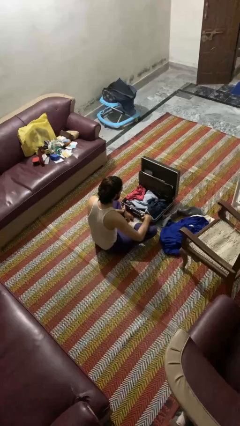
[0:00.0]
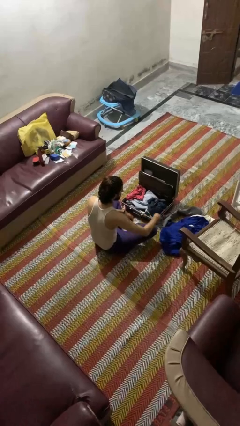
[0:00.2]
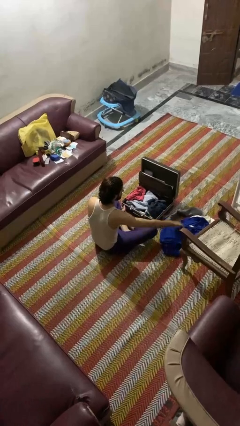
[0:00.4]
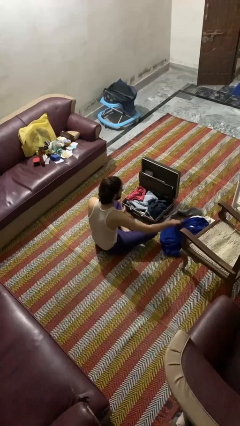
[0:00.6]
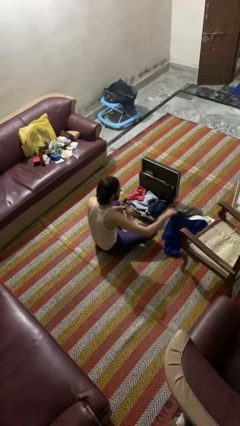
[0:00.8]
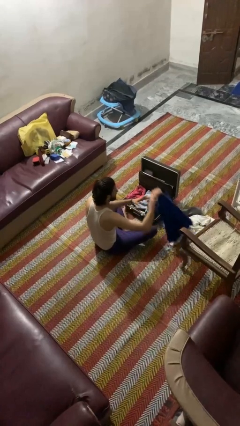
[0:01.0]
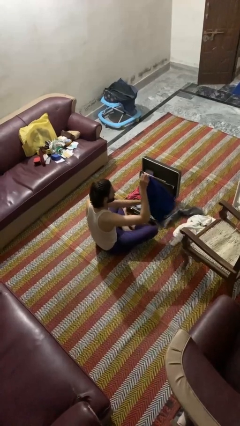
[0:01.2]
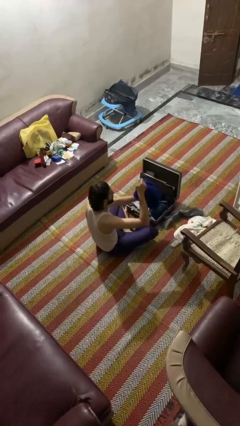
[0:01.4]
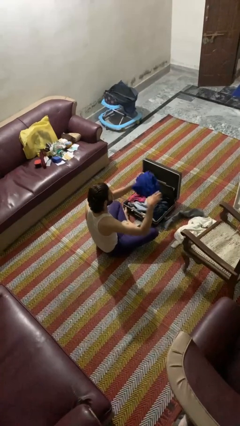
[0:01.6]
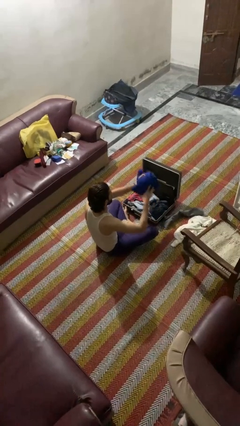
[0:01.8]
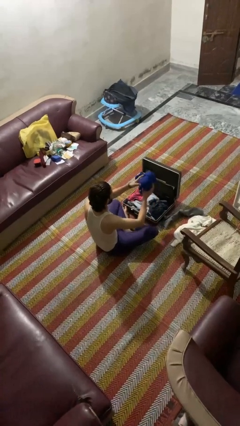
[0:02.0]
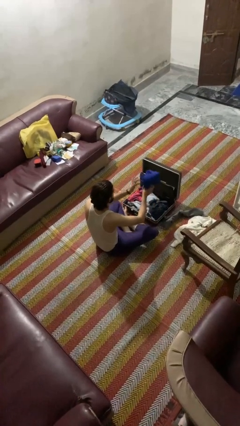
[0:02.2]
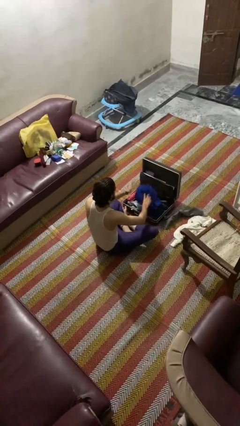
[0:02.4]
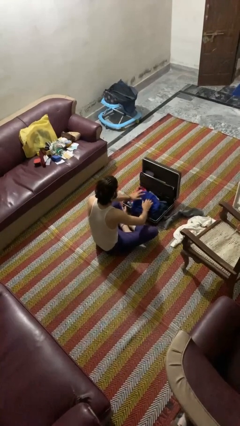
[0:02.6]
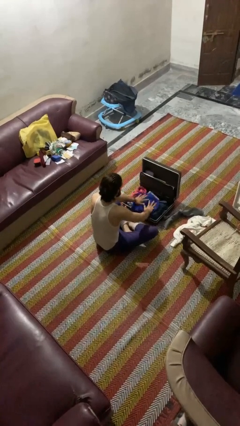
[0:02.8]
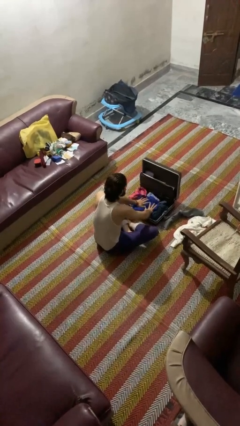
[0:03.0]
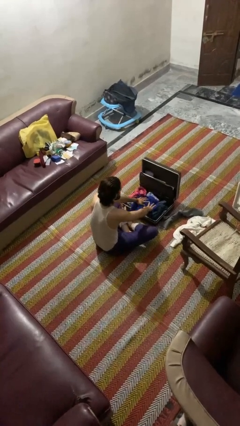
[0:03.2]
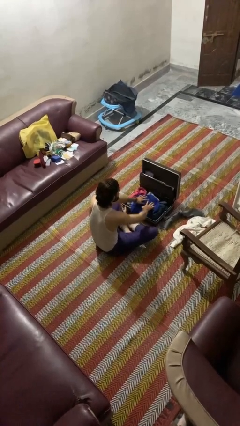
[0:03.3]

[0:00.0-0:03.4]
person loads clothes into suitcase

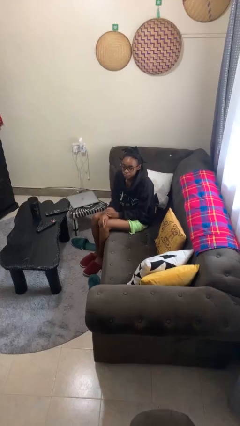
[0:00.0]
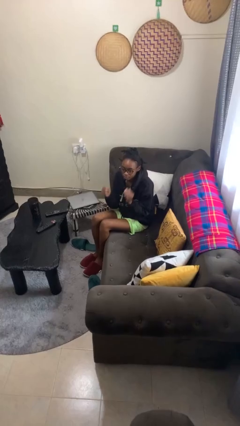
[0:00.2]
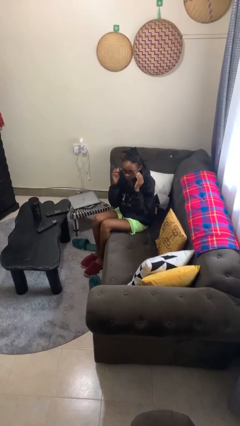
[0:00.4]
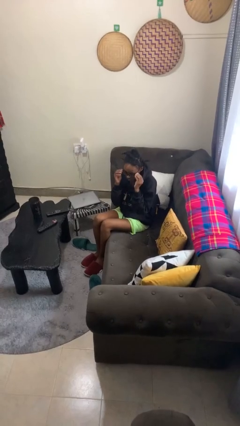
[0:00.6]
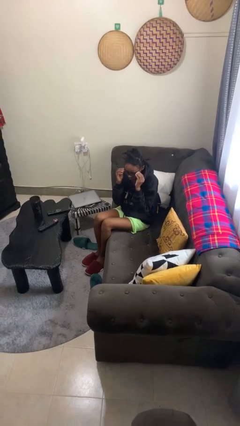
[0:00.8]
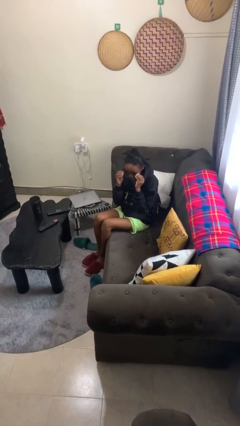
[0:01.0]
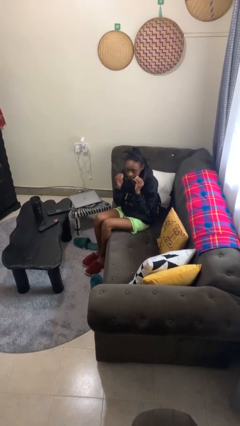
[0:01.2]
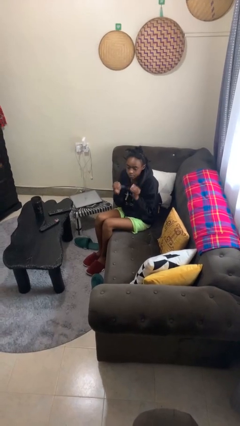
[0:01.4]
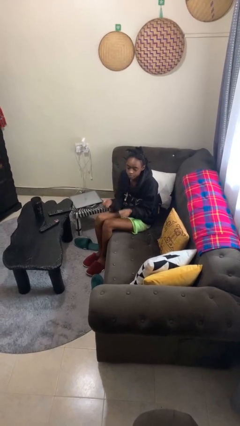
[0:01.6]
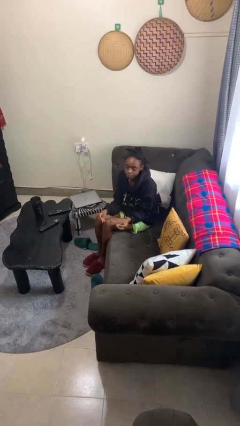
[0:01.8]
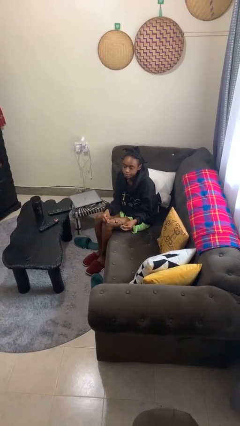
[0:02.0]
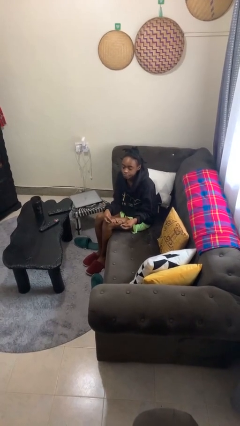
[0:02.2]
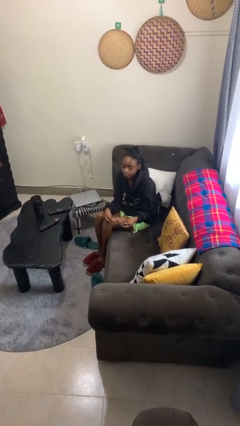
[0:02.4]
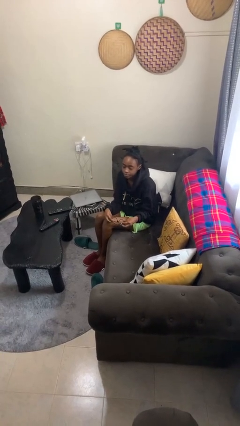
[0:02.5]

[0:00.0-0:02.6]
person takes off glasses

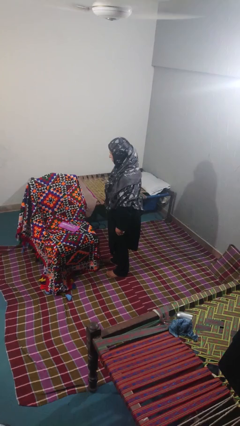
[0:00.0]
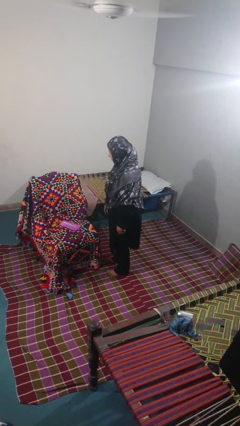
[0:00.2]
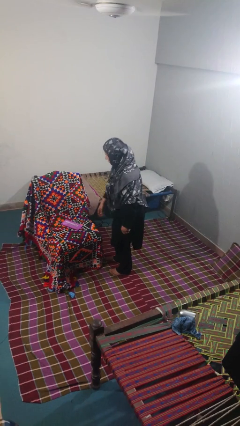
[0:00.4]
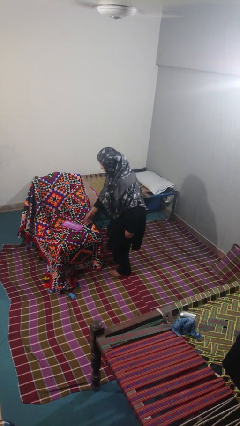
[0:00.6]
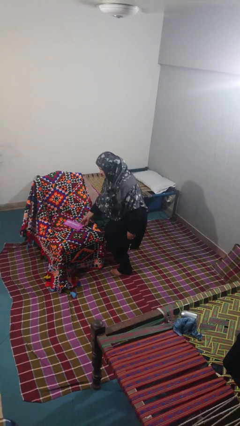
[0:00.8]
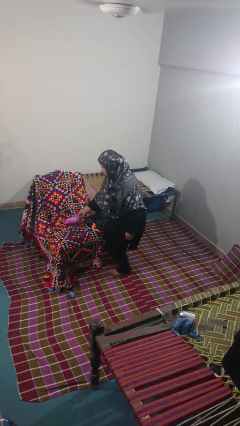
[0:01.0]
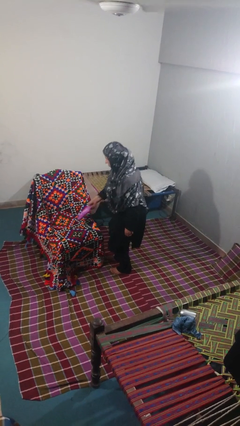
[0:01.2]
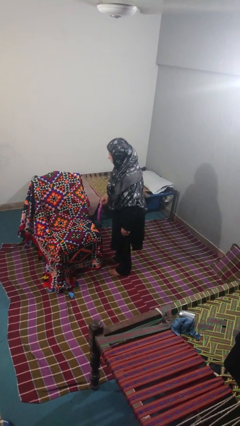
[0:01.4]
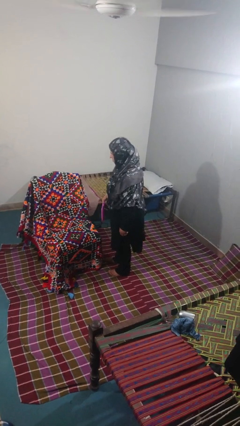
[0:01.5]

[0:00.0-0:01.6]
person picks up object from couch

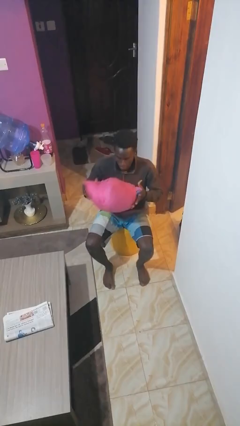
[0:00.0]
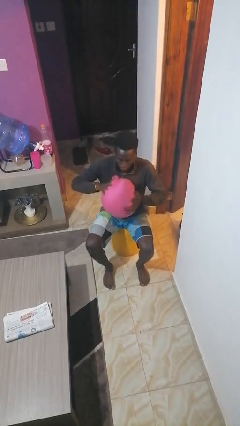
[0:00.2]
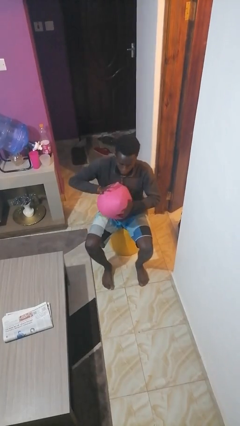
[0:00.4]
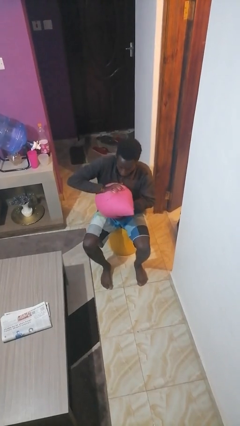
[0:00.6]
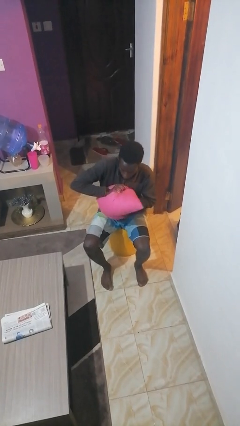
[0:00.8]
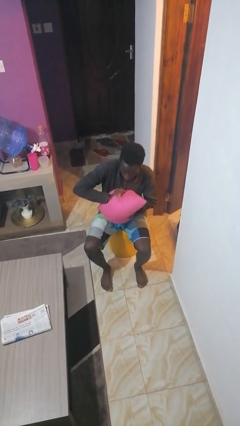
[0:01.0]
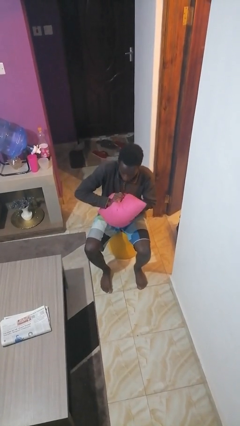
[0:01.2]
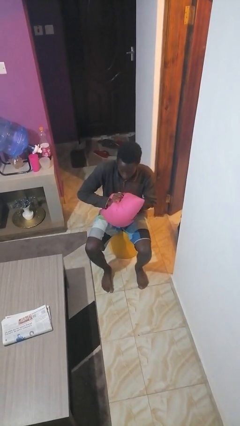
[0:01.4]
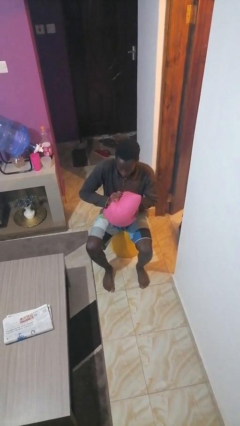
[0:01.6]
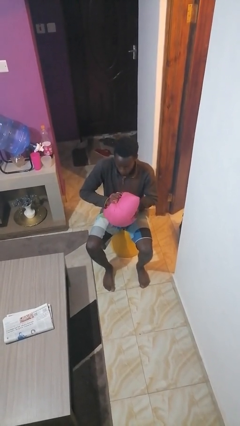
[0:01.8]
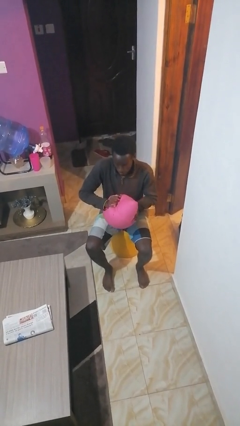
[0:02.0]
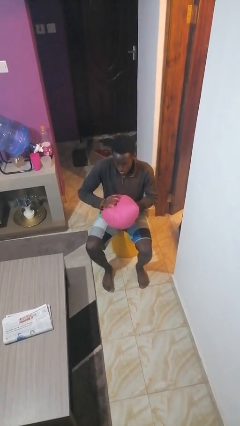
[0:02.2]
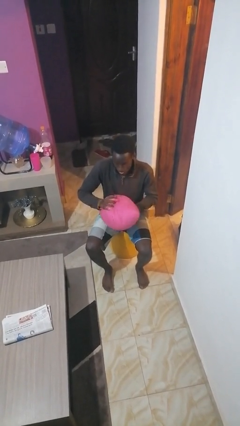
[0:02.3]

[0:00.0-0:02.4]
person squeezes object

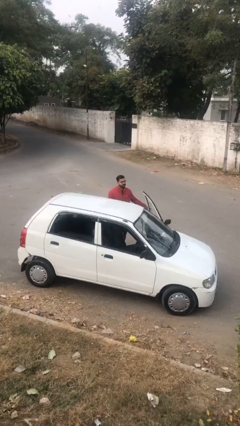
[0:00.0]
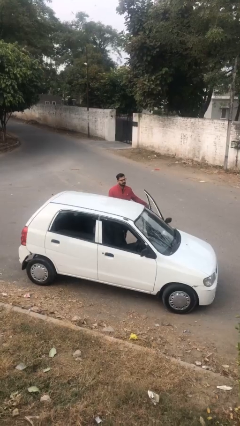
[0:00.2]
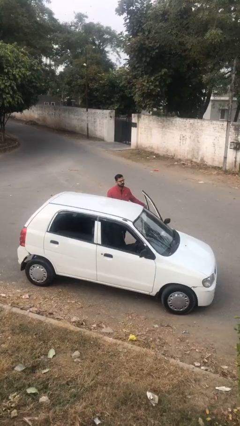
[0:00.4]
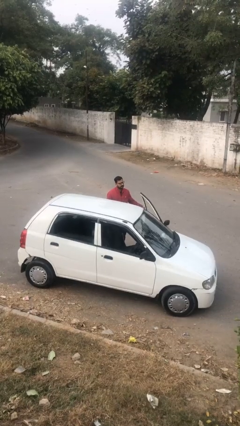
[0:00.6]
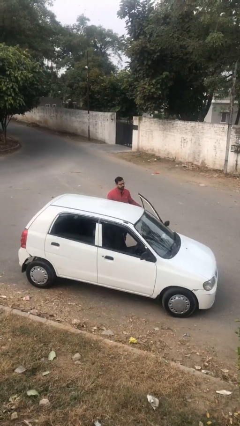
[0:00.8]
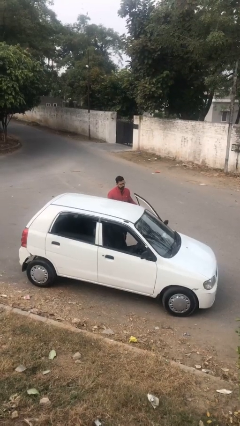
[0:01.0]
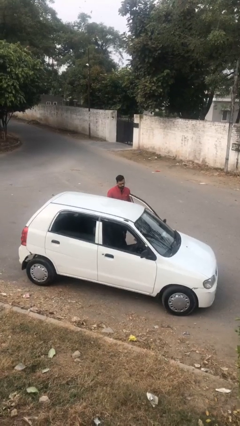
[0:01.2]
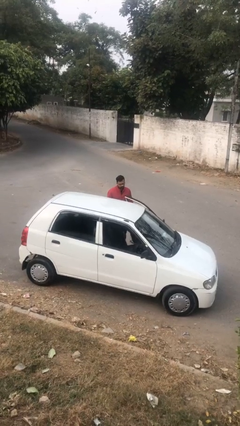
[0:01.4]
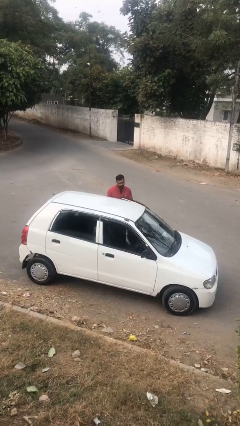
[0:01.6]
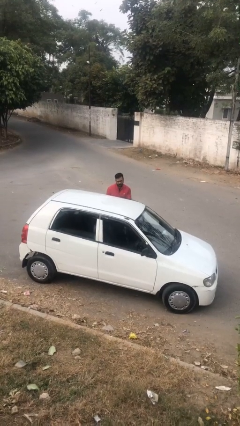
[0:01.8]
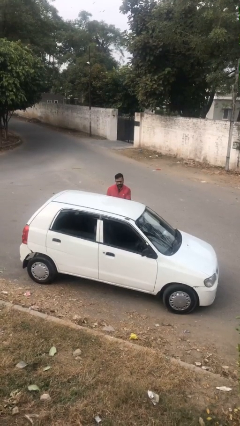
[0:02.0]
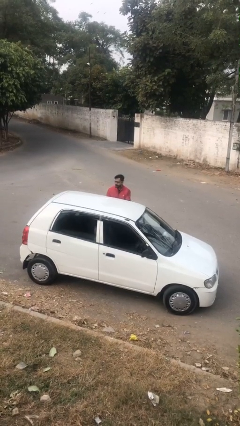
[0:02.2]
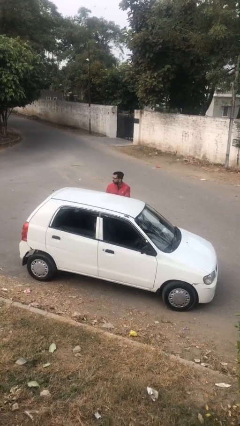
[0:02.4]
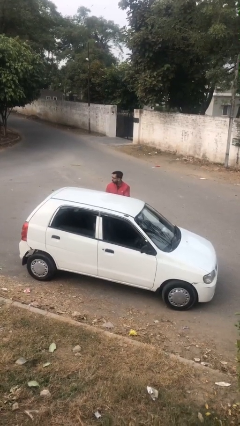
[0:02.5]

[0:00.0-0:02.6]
person closes car door

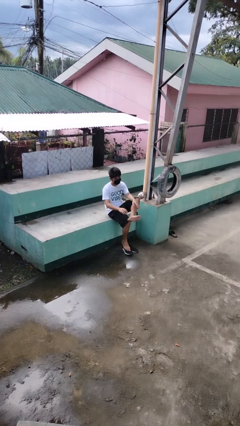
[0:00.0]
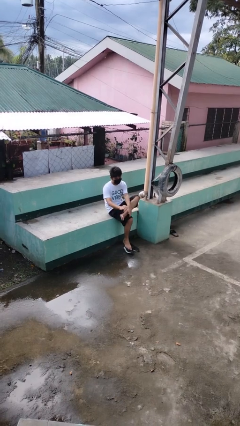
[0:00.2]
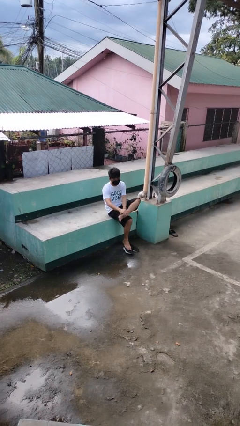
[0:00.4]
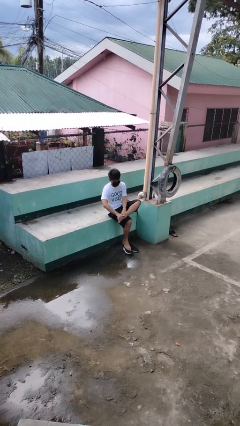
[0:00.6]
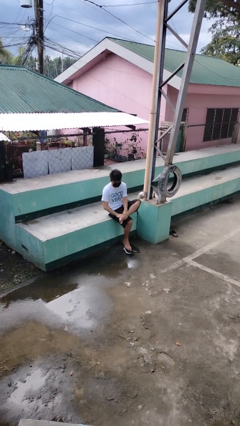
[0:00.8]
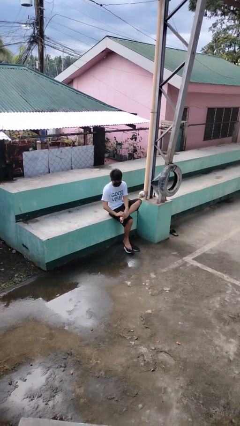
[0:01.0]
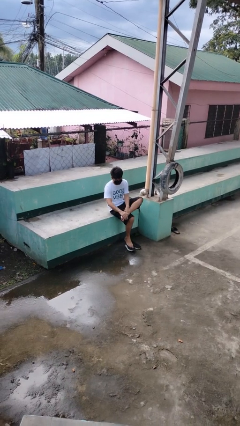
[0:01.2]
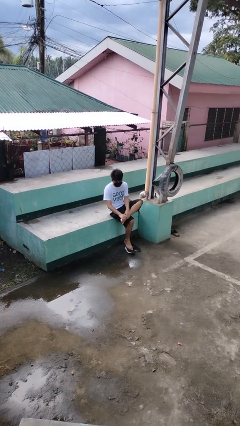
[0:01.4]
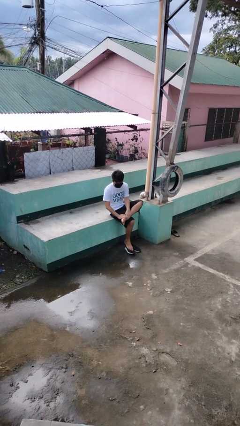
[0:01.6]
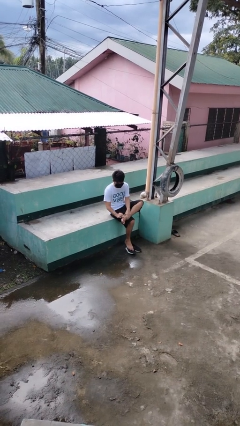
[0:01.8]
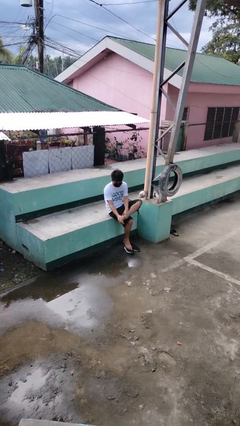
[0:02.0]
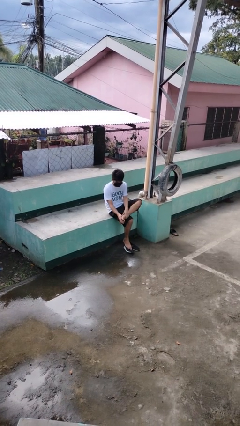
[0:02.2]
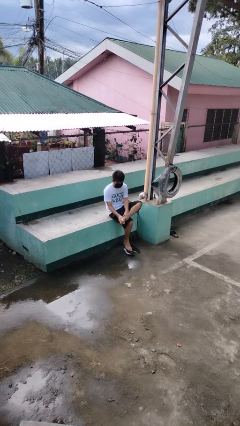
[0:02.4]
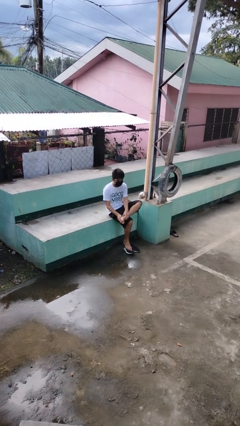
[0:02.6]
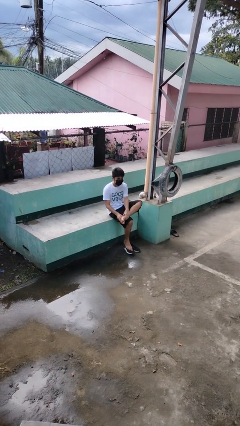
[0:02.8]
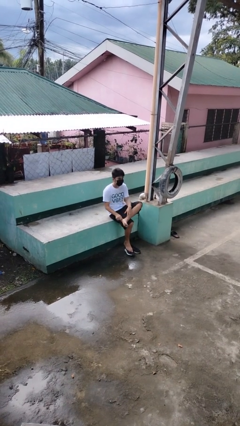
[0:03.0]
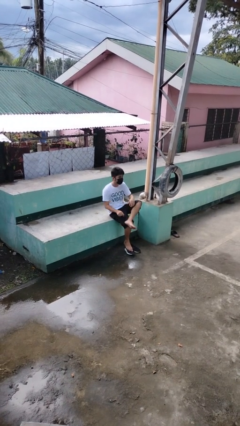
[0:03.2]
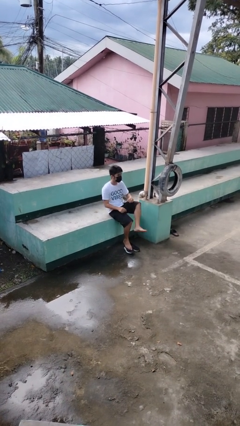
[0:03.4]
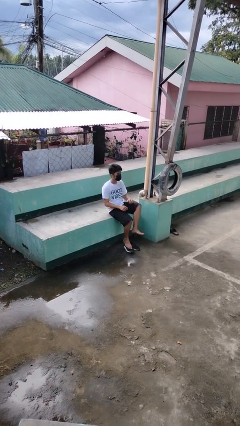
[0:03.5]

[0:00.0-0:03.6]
person rubs foot

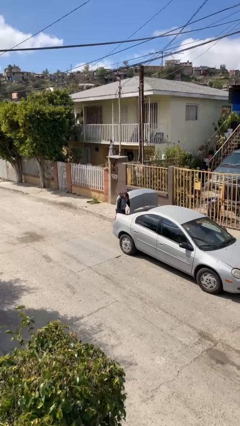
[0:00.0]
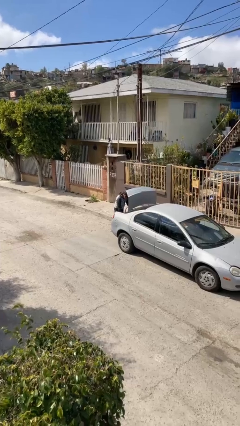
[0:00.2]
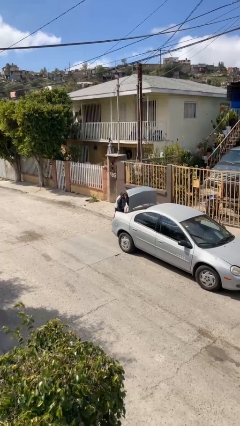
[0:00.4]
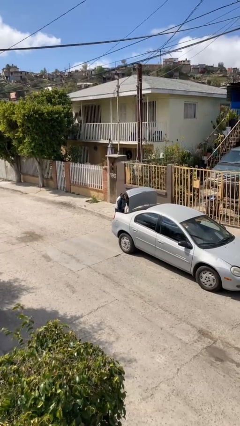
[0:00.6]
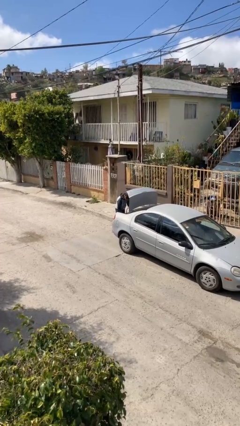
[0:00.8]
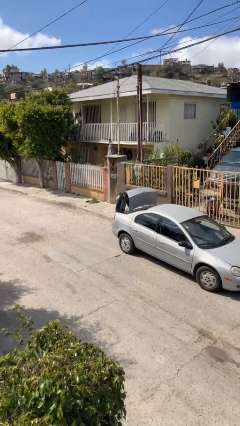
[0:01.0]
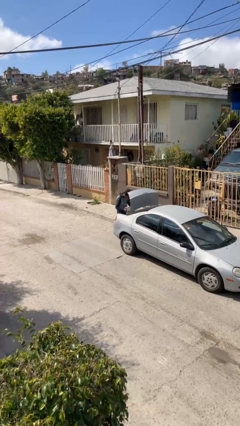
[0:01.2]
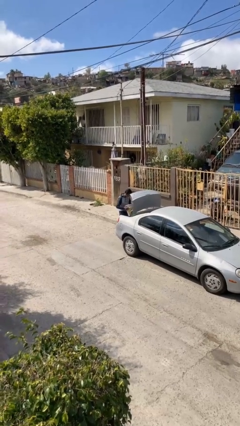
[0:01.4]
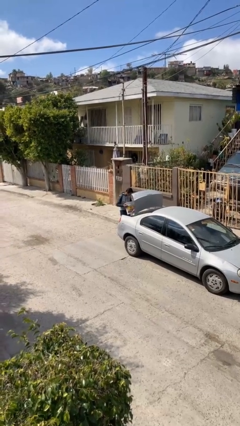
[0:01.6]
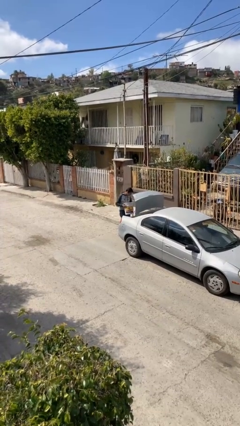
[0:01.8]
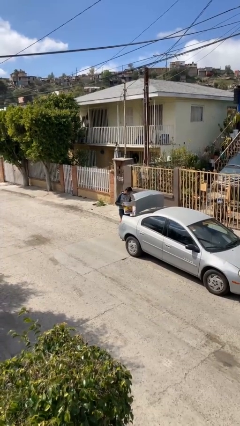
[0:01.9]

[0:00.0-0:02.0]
person unloads car
